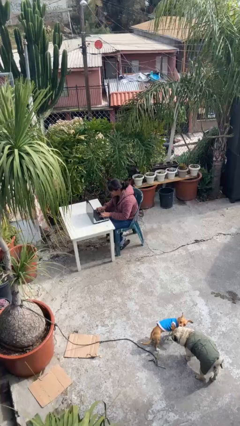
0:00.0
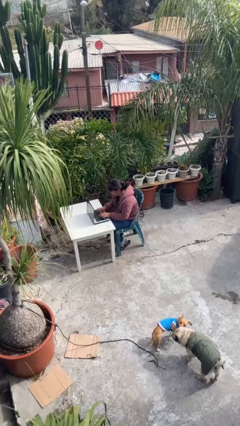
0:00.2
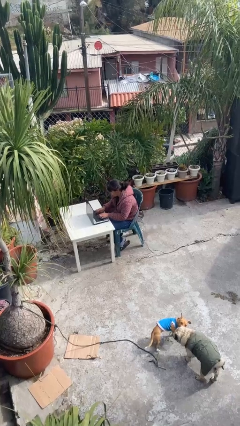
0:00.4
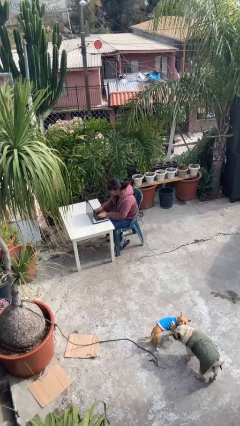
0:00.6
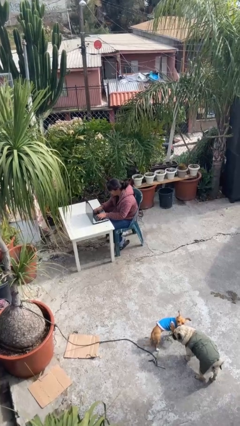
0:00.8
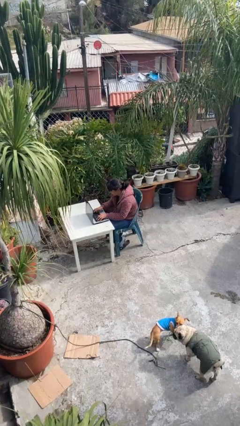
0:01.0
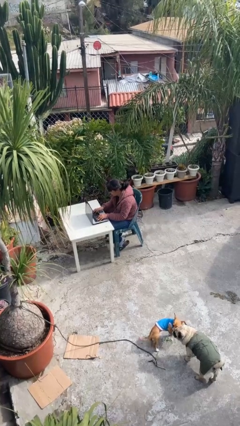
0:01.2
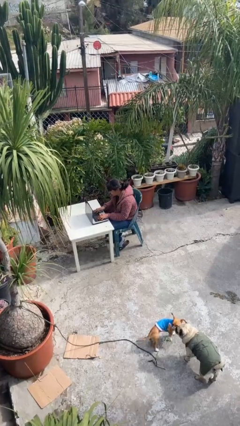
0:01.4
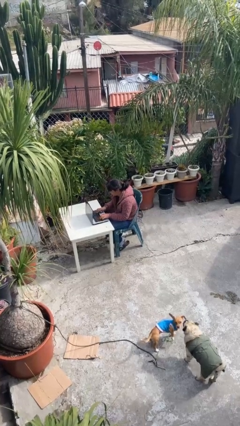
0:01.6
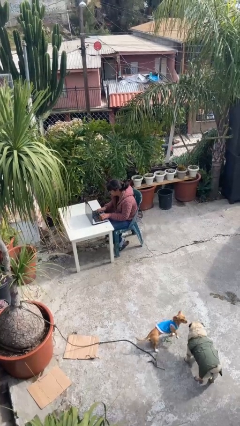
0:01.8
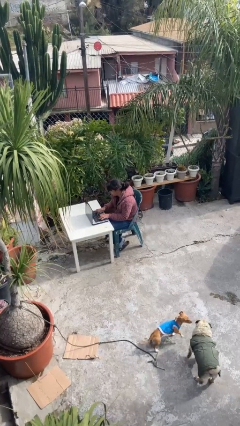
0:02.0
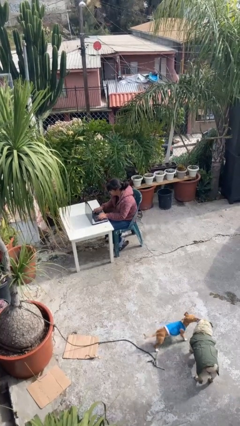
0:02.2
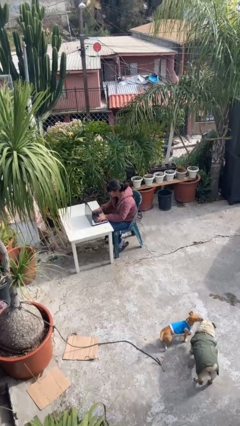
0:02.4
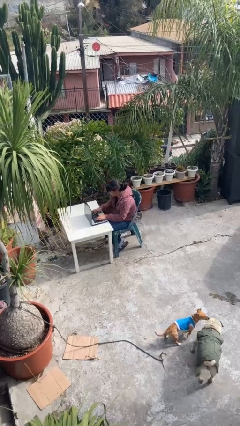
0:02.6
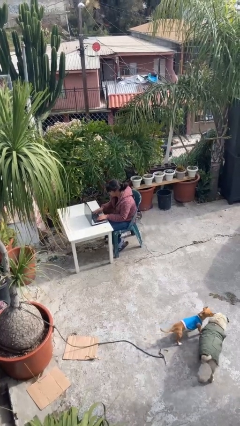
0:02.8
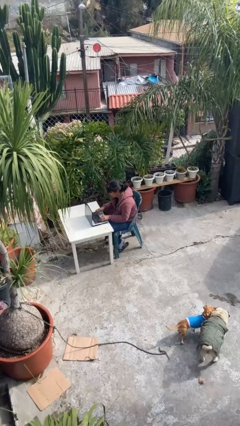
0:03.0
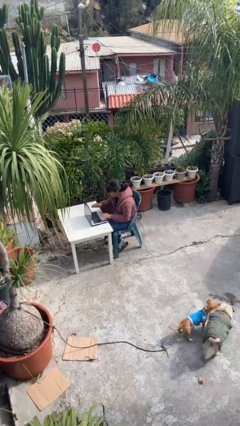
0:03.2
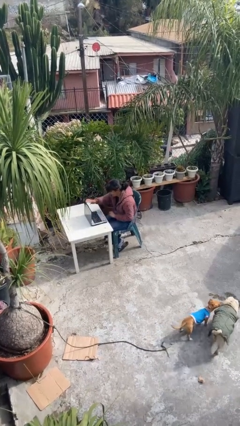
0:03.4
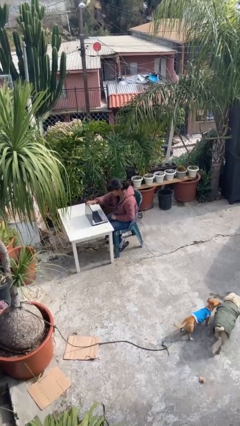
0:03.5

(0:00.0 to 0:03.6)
person interacts with laptop

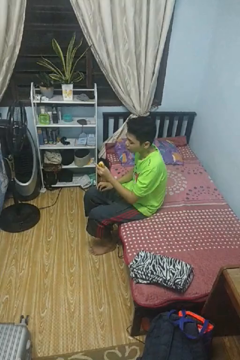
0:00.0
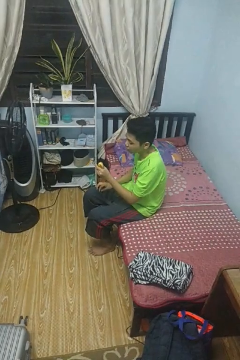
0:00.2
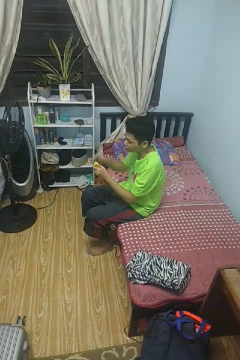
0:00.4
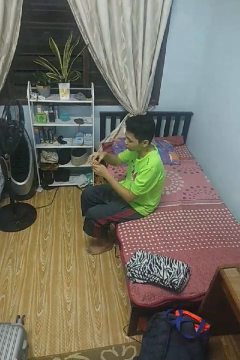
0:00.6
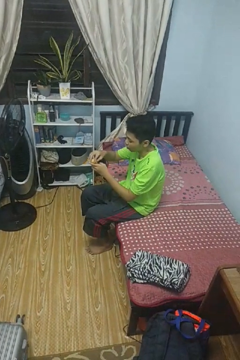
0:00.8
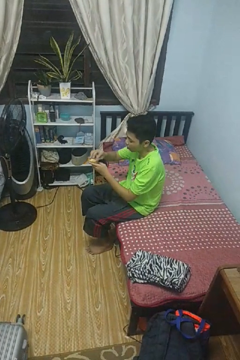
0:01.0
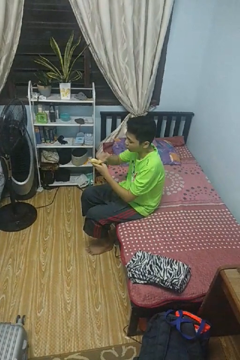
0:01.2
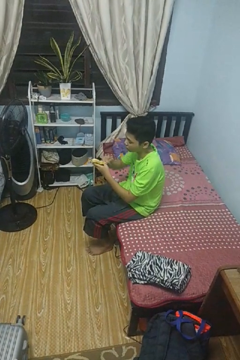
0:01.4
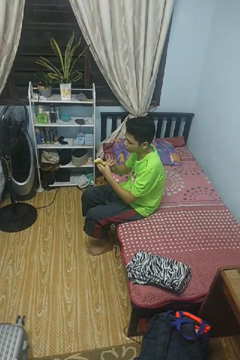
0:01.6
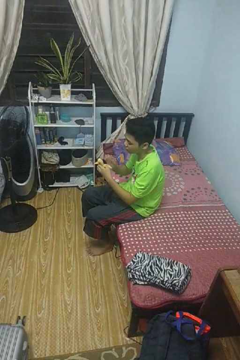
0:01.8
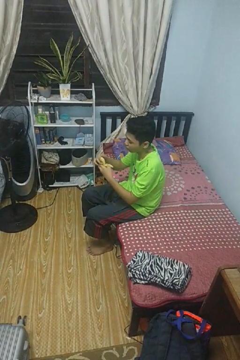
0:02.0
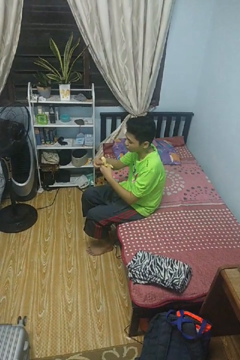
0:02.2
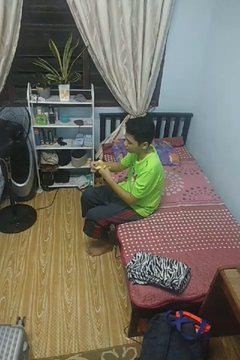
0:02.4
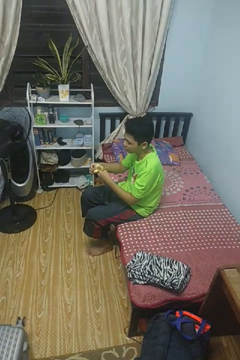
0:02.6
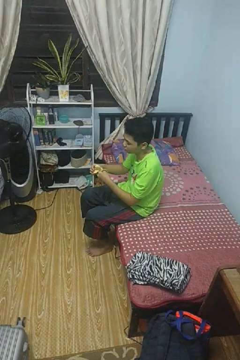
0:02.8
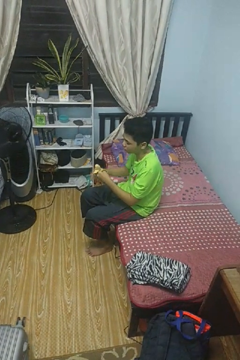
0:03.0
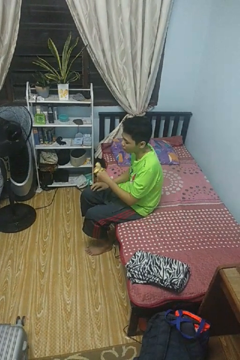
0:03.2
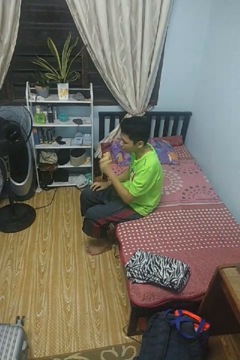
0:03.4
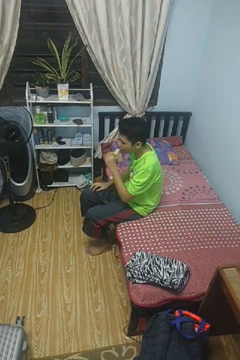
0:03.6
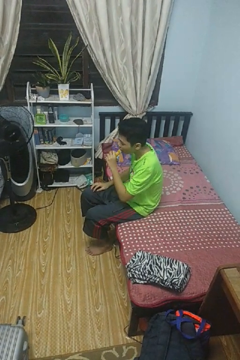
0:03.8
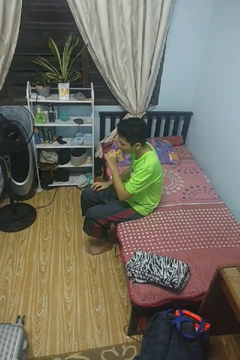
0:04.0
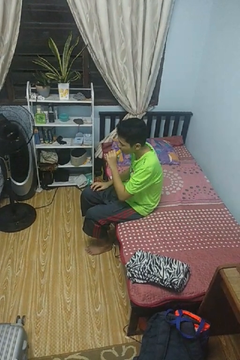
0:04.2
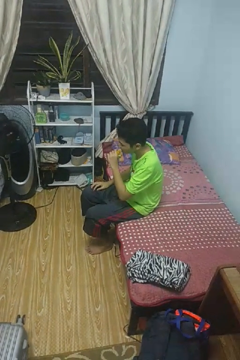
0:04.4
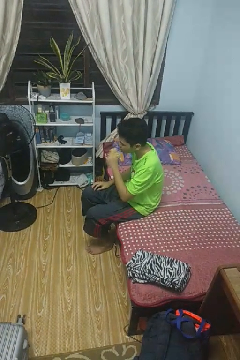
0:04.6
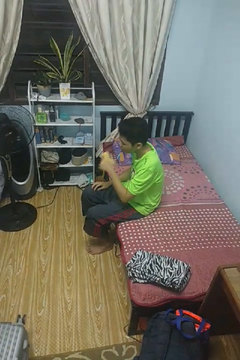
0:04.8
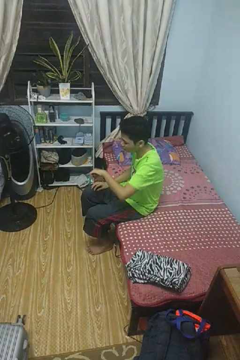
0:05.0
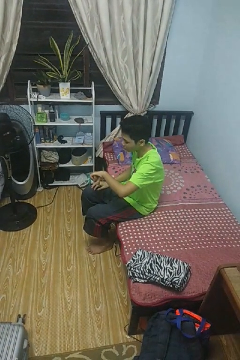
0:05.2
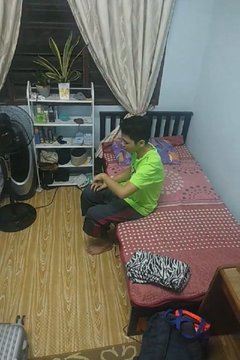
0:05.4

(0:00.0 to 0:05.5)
person eats banana

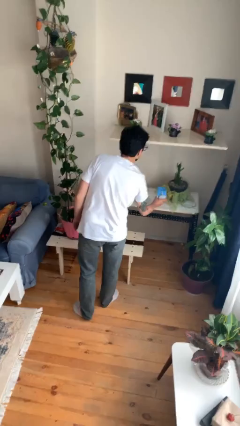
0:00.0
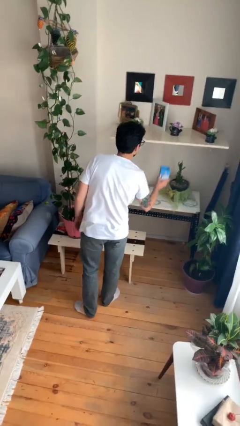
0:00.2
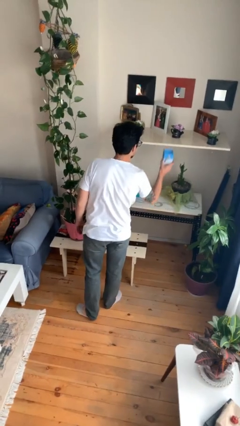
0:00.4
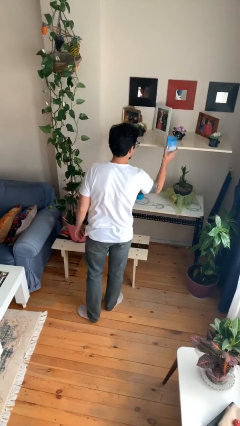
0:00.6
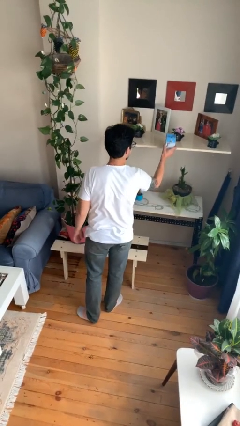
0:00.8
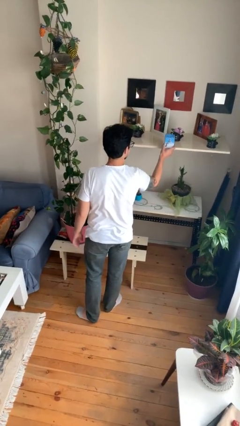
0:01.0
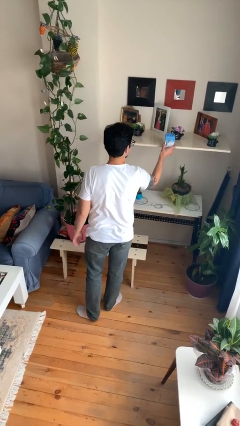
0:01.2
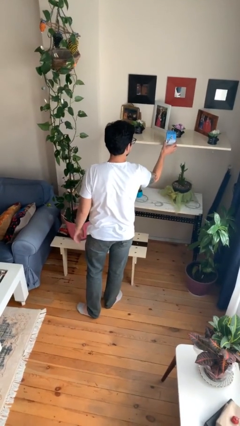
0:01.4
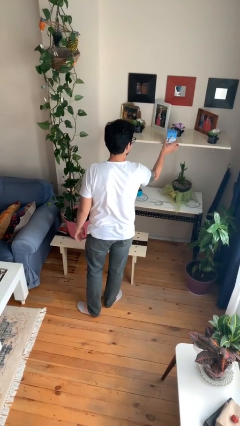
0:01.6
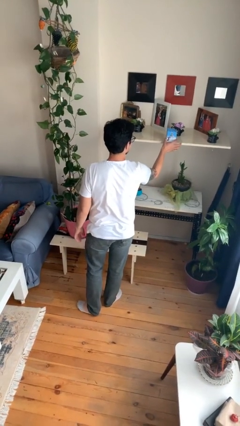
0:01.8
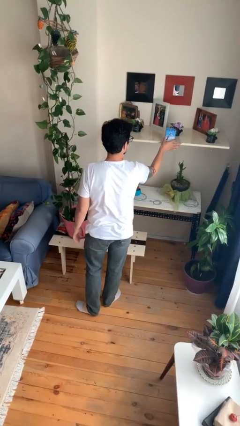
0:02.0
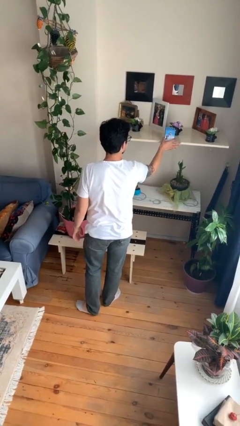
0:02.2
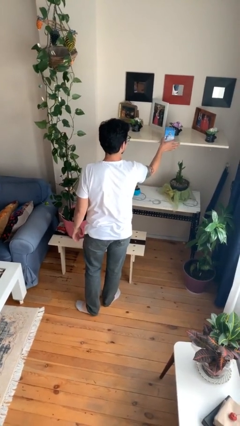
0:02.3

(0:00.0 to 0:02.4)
person puts down object on shelf

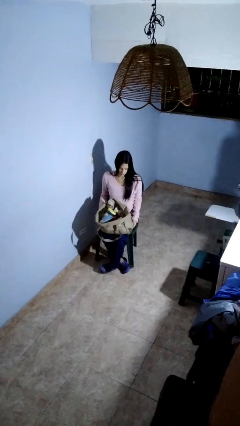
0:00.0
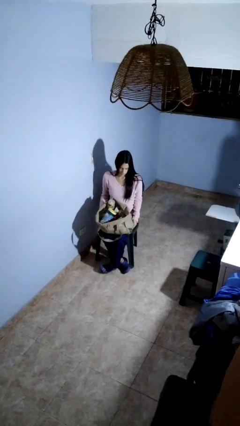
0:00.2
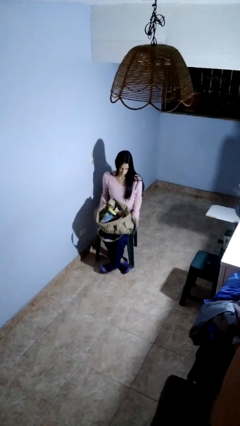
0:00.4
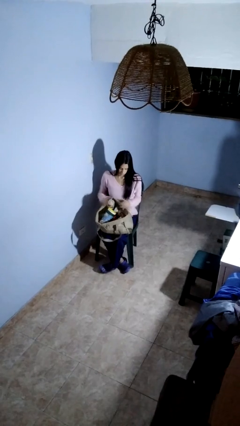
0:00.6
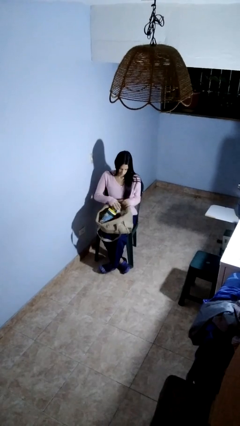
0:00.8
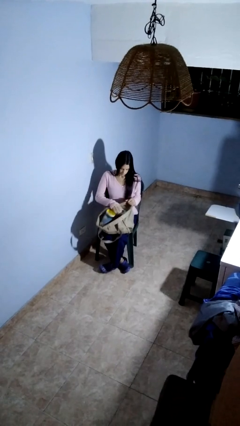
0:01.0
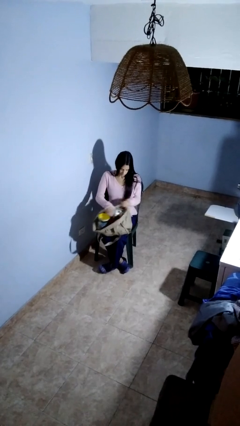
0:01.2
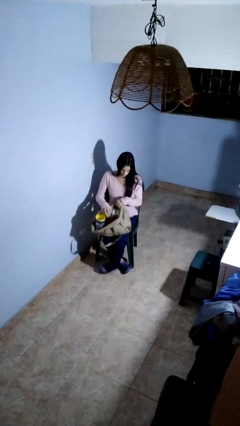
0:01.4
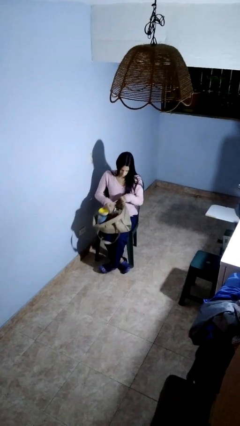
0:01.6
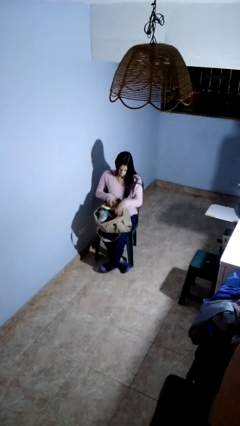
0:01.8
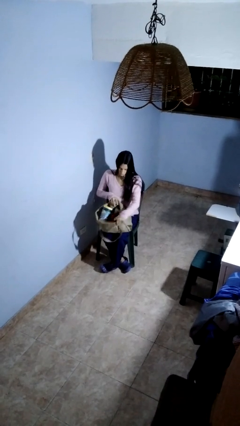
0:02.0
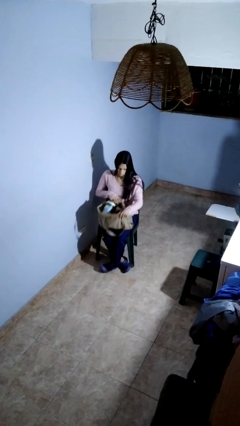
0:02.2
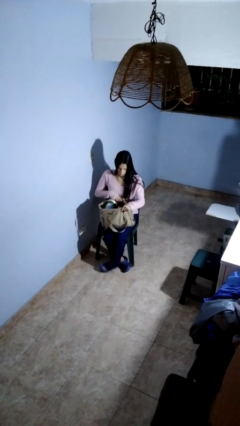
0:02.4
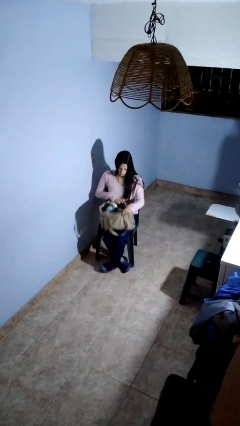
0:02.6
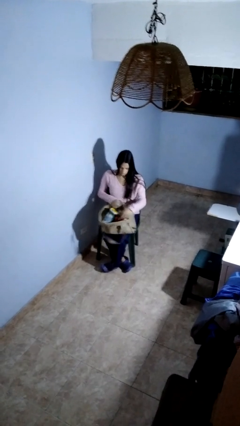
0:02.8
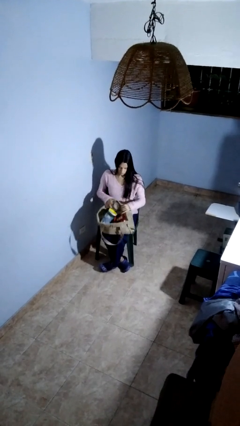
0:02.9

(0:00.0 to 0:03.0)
person searches in bag

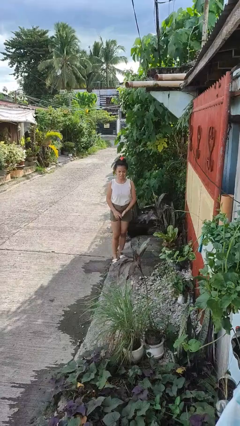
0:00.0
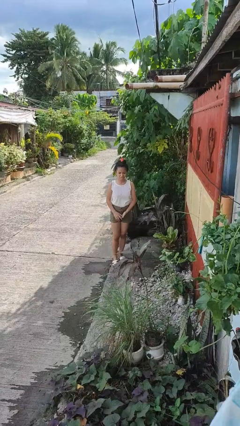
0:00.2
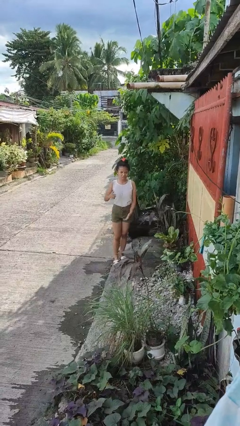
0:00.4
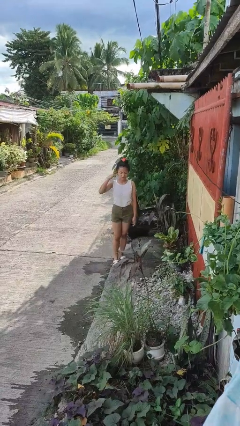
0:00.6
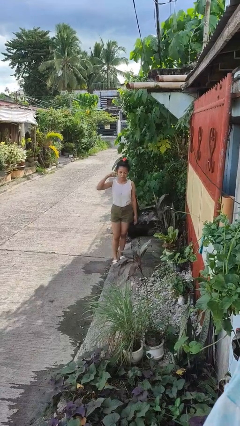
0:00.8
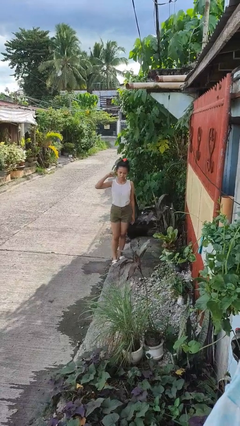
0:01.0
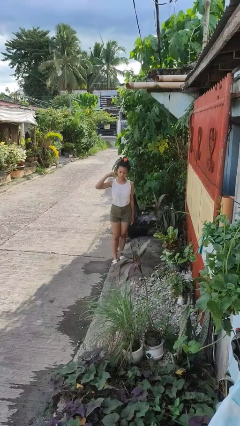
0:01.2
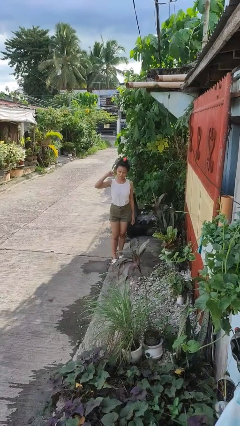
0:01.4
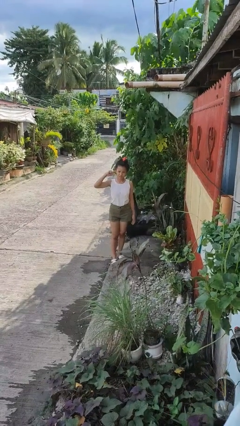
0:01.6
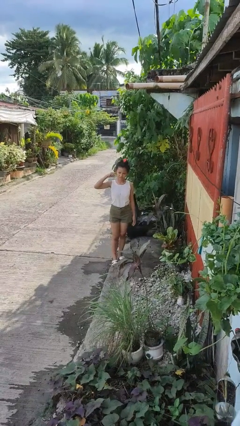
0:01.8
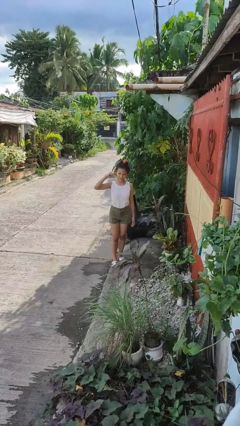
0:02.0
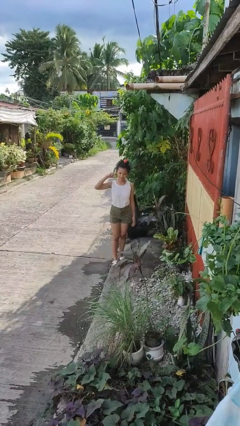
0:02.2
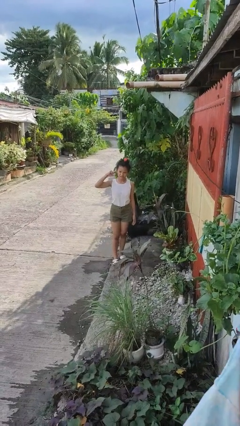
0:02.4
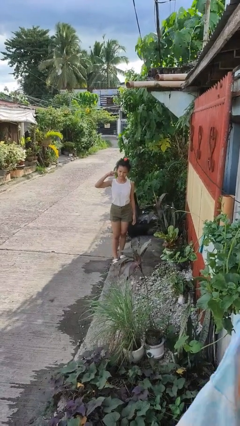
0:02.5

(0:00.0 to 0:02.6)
person touches earlobe

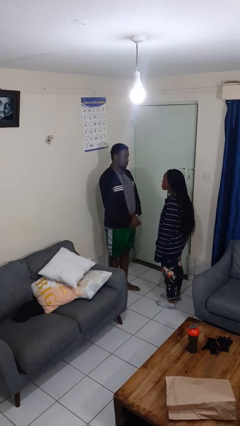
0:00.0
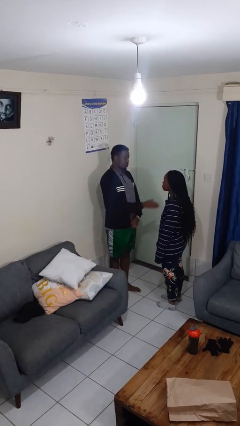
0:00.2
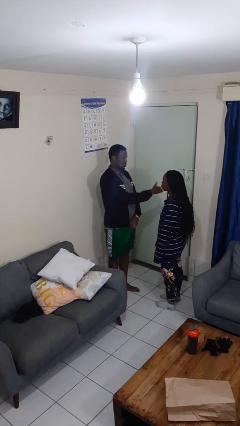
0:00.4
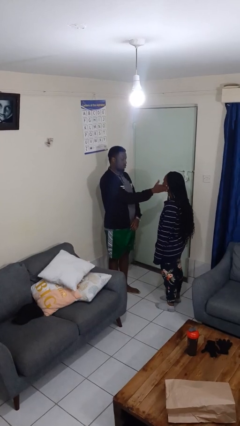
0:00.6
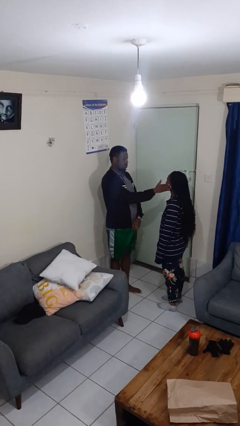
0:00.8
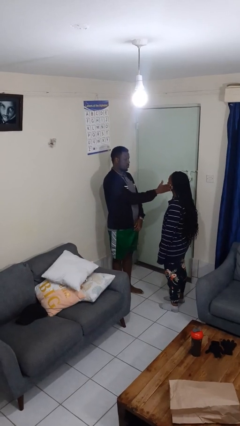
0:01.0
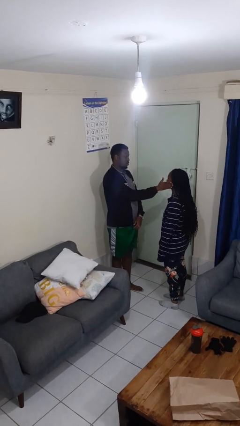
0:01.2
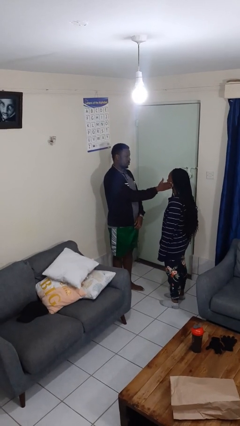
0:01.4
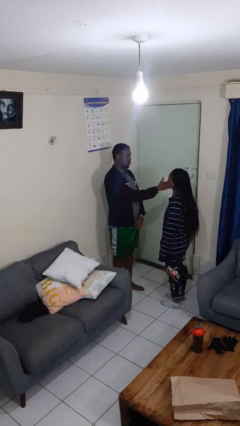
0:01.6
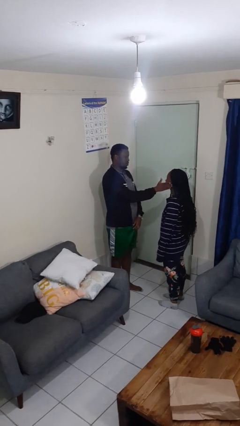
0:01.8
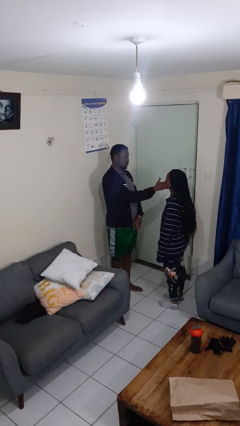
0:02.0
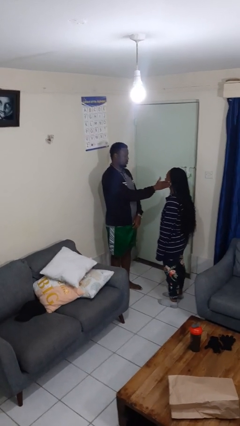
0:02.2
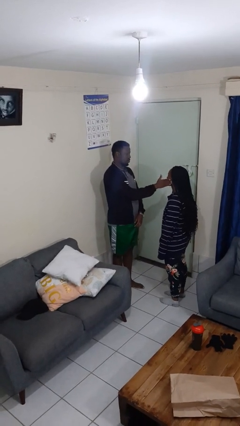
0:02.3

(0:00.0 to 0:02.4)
person touches face of person
